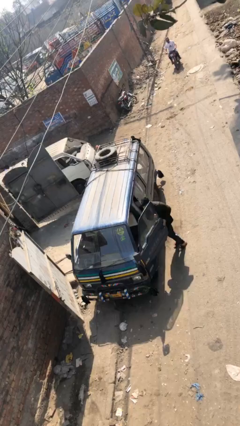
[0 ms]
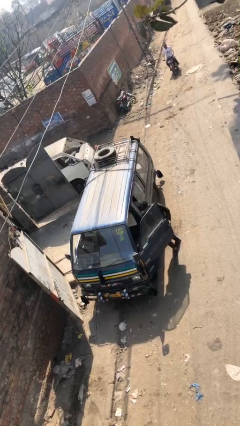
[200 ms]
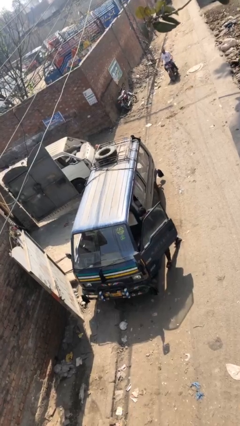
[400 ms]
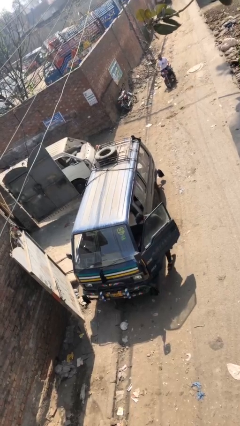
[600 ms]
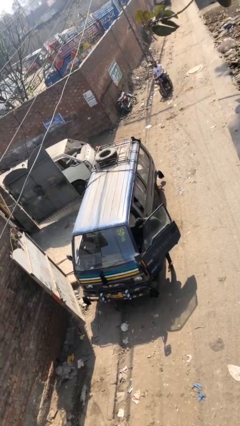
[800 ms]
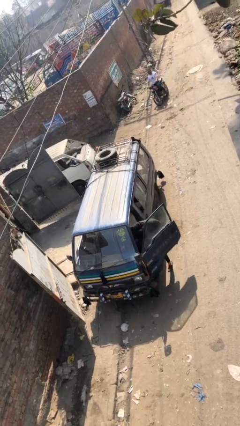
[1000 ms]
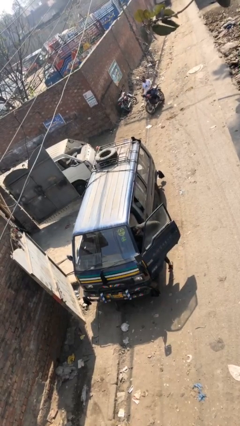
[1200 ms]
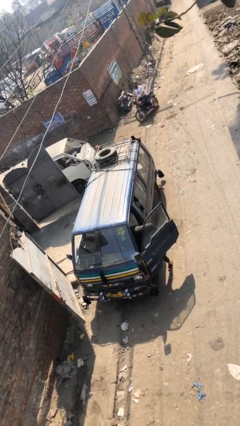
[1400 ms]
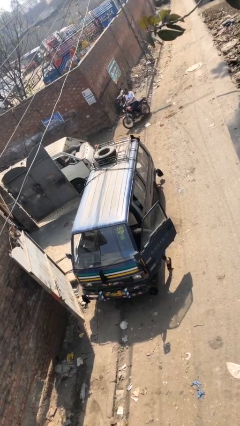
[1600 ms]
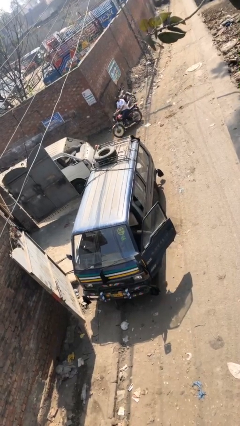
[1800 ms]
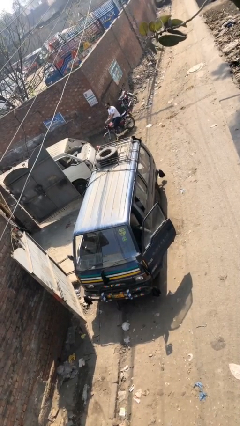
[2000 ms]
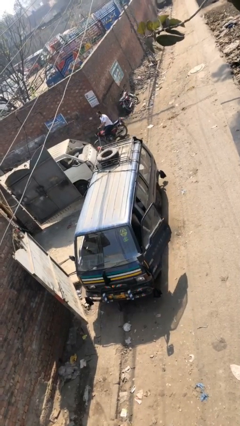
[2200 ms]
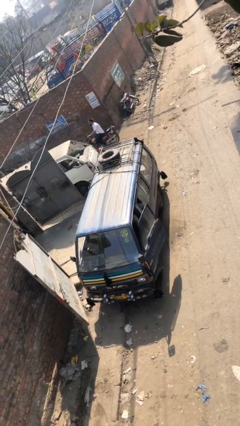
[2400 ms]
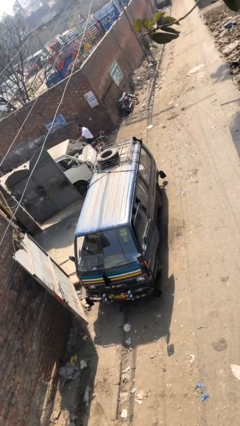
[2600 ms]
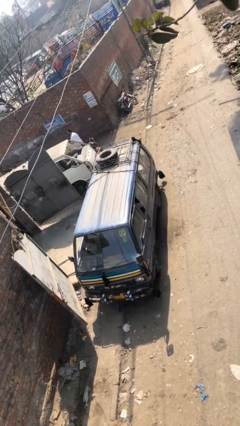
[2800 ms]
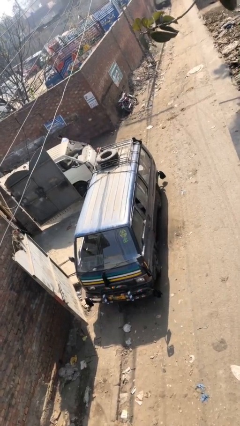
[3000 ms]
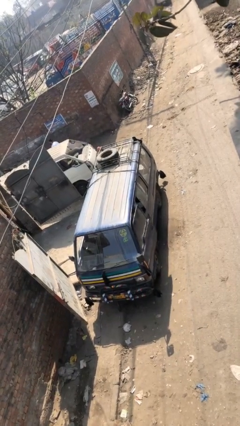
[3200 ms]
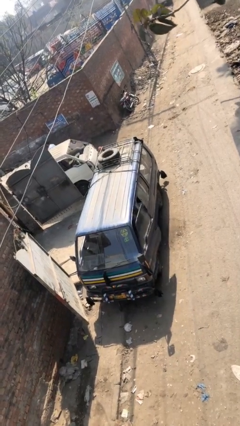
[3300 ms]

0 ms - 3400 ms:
car picks up person

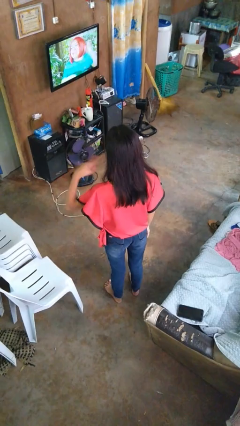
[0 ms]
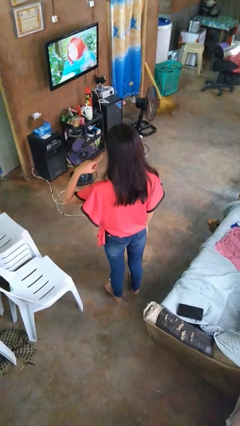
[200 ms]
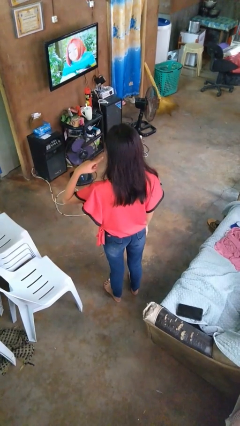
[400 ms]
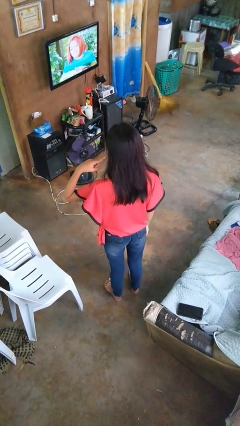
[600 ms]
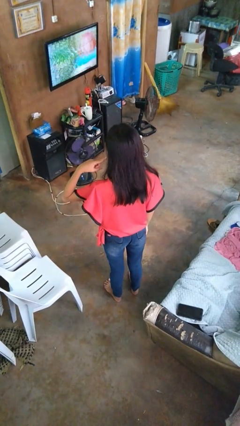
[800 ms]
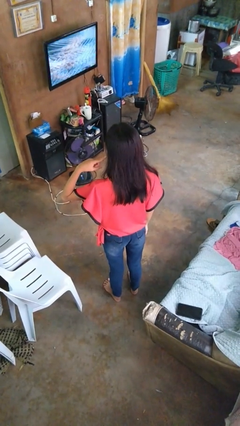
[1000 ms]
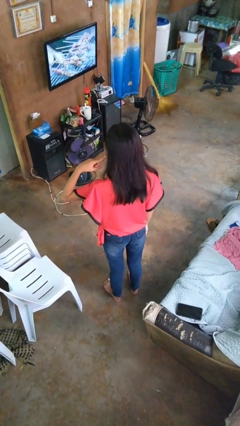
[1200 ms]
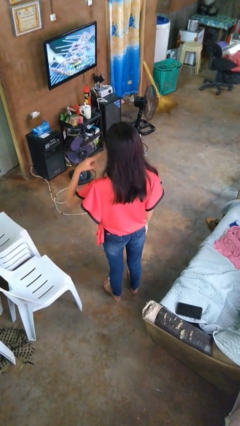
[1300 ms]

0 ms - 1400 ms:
person gestures listen closely

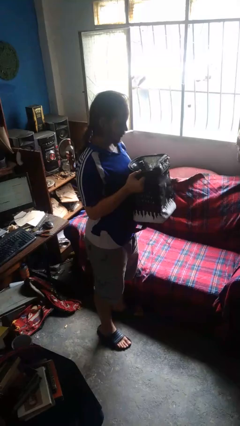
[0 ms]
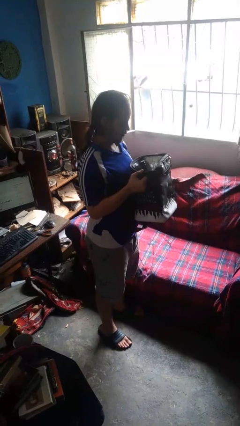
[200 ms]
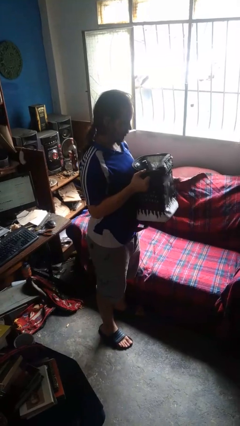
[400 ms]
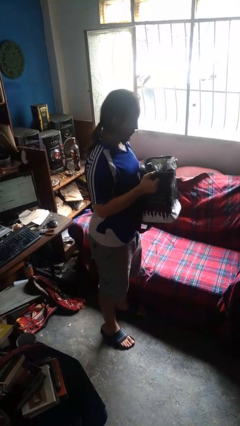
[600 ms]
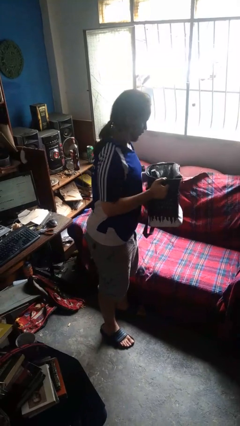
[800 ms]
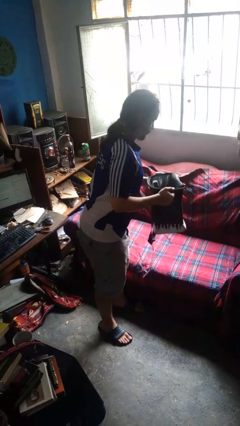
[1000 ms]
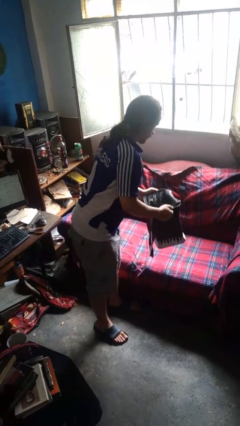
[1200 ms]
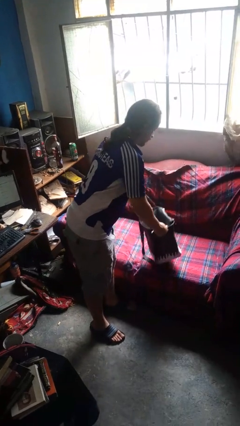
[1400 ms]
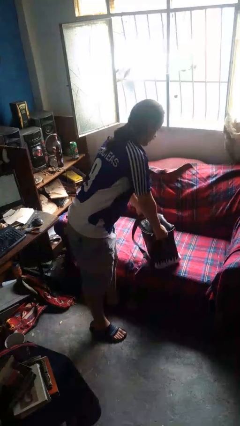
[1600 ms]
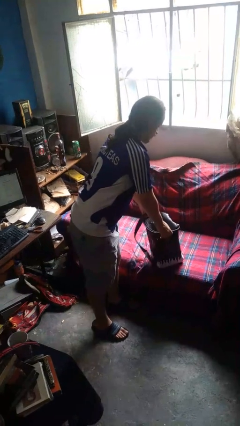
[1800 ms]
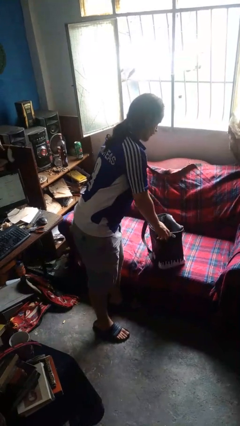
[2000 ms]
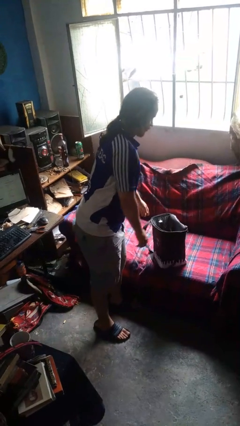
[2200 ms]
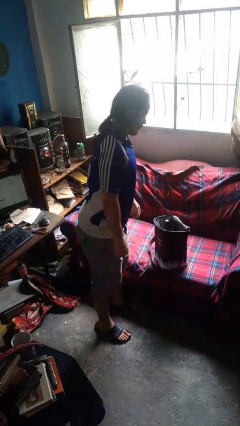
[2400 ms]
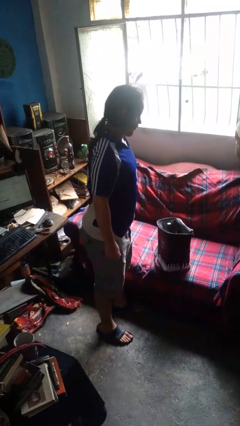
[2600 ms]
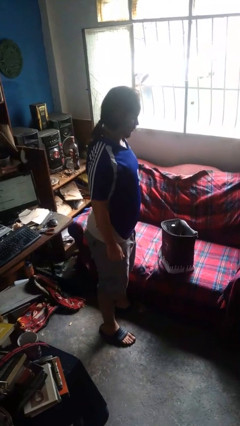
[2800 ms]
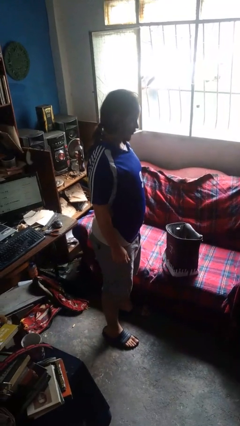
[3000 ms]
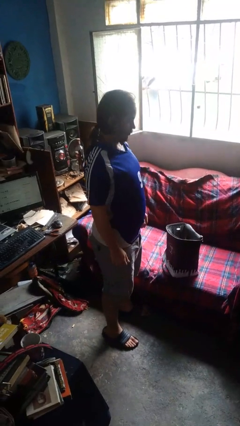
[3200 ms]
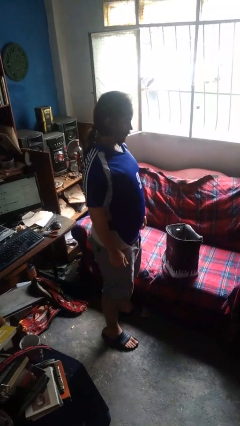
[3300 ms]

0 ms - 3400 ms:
person puts down object on couch

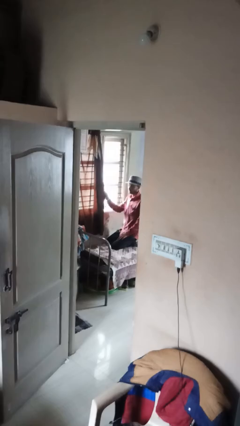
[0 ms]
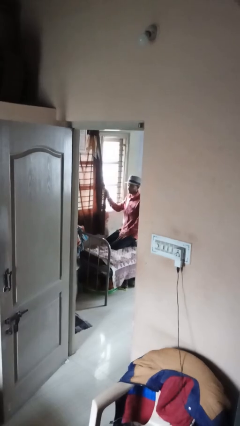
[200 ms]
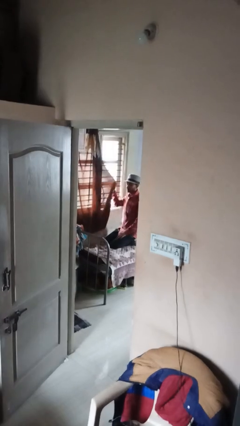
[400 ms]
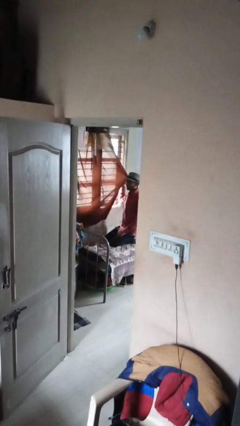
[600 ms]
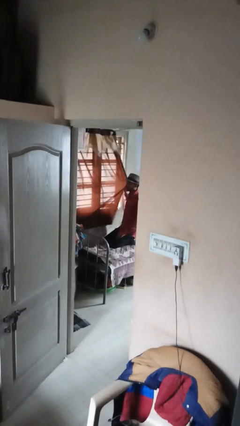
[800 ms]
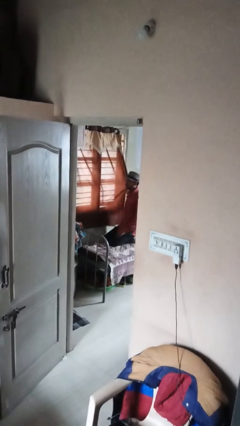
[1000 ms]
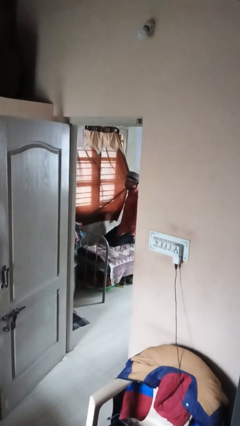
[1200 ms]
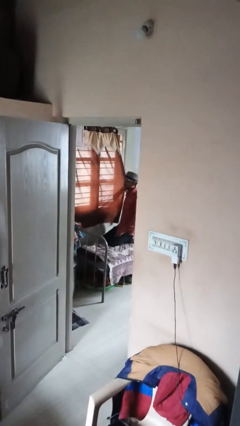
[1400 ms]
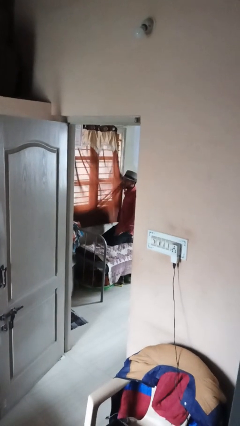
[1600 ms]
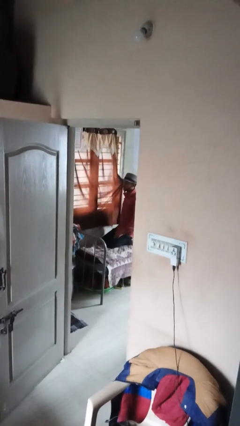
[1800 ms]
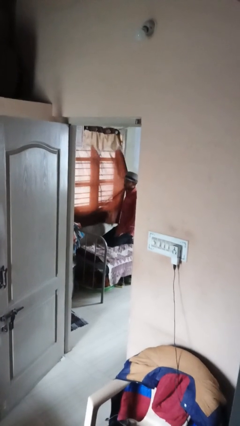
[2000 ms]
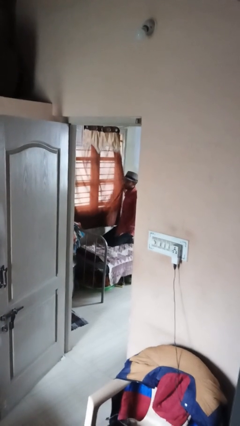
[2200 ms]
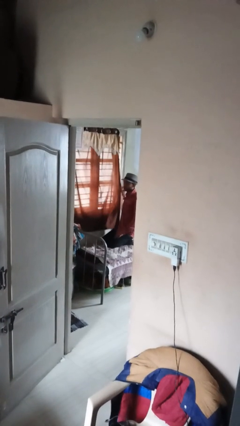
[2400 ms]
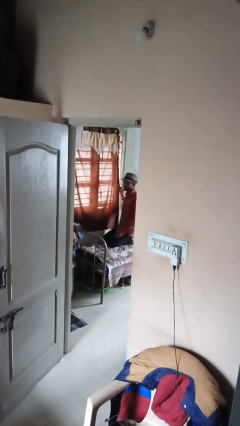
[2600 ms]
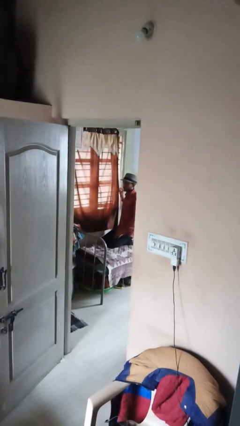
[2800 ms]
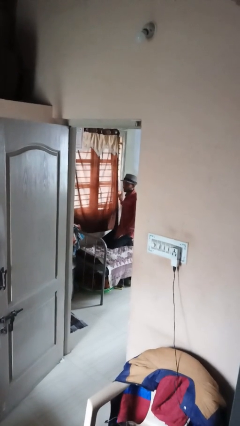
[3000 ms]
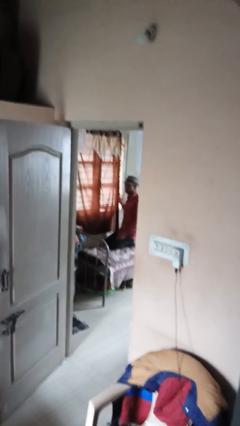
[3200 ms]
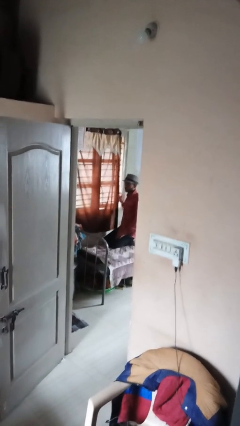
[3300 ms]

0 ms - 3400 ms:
person closes curtains

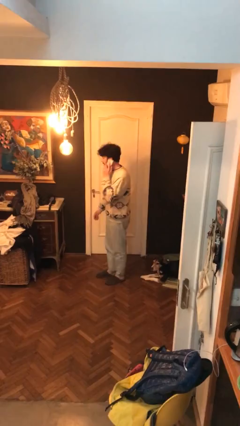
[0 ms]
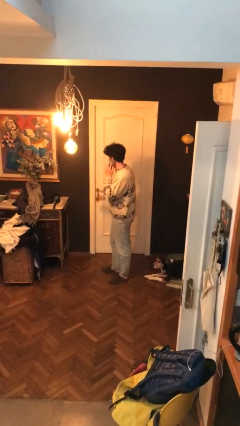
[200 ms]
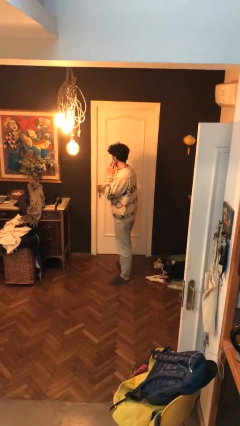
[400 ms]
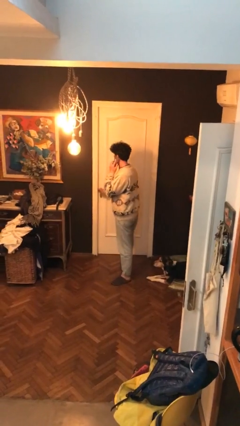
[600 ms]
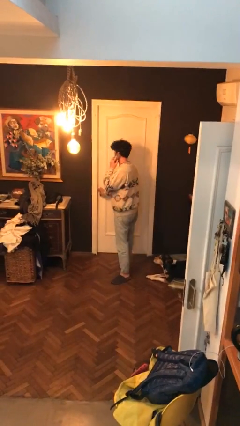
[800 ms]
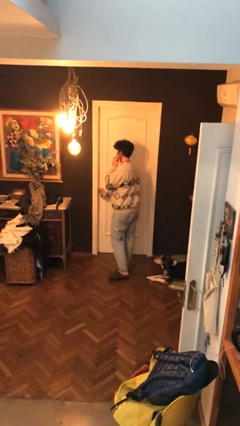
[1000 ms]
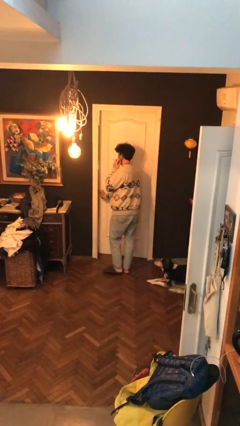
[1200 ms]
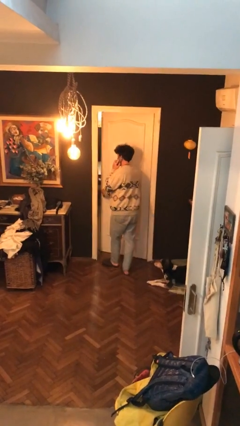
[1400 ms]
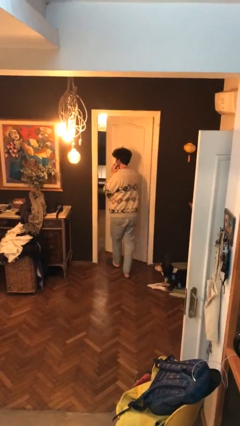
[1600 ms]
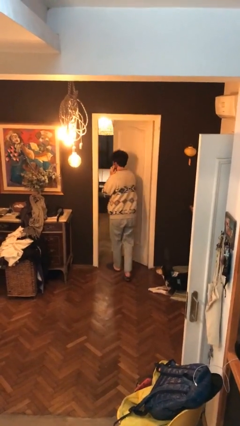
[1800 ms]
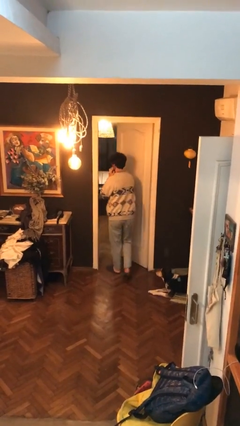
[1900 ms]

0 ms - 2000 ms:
person opens facility door

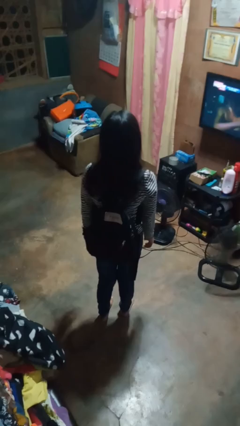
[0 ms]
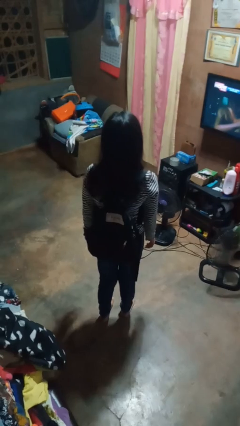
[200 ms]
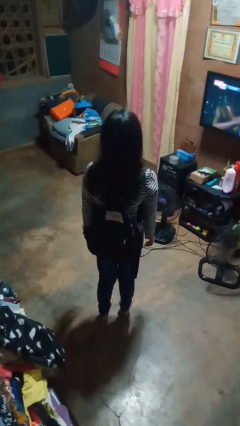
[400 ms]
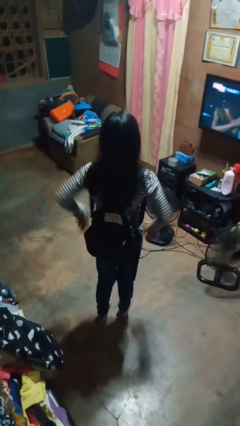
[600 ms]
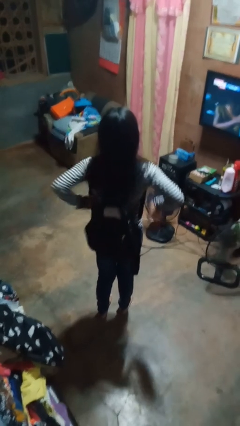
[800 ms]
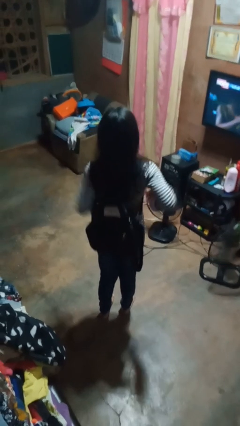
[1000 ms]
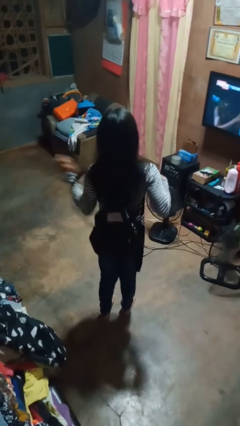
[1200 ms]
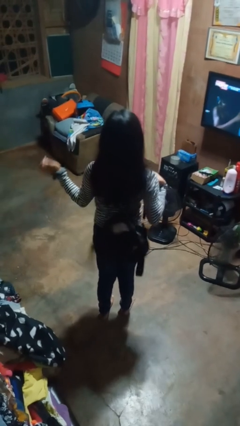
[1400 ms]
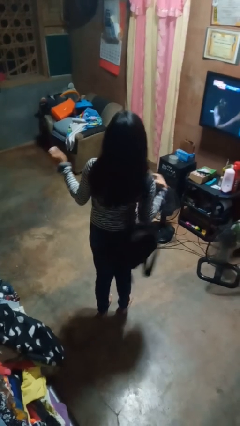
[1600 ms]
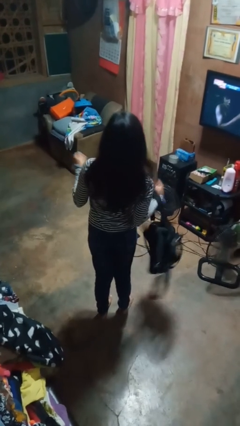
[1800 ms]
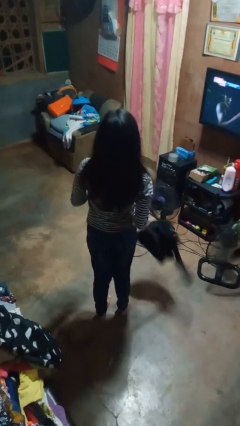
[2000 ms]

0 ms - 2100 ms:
person takes off backpack

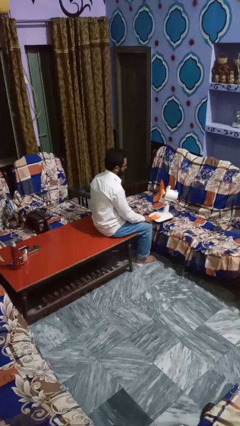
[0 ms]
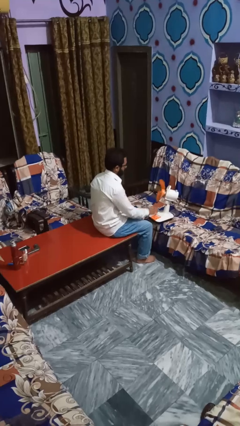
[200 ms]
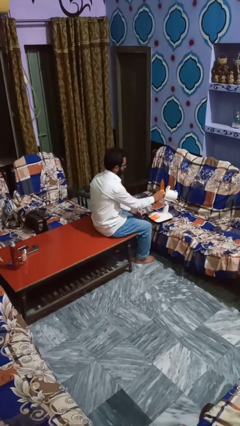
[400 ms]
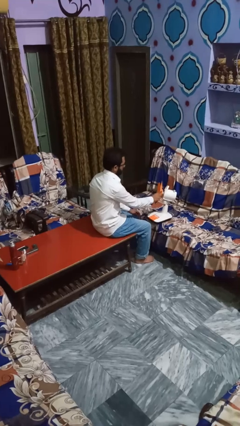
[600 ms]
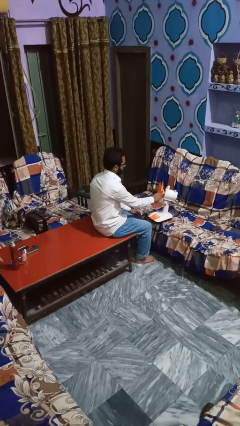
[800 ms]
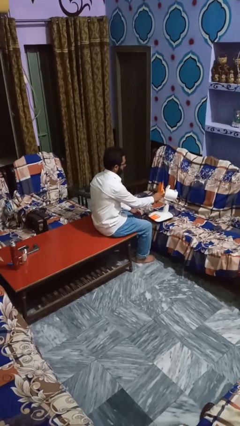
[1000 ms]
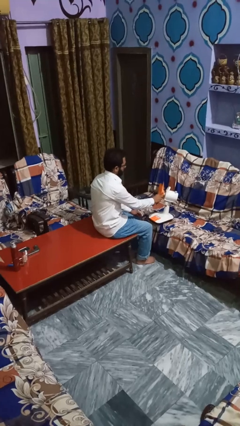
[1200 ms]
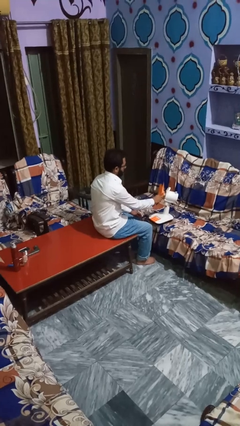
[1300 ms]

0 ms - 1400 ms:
person turns off fan
